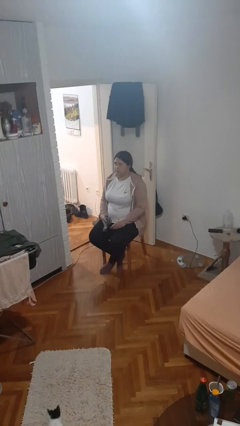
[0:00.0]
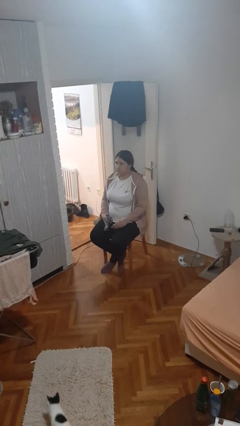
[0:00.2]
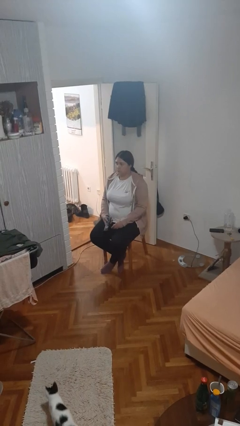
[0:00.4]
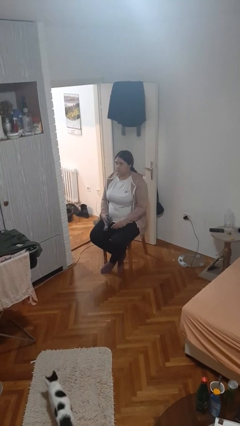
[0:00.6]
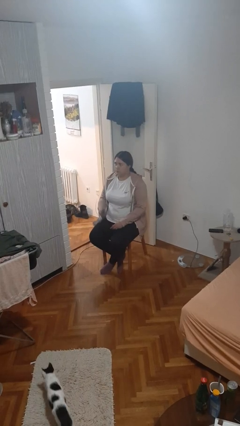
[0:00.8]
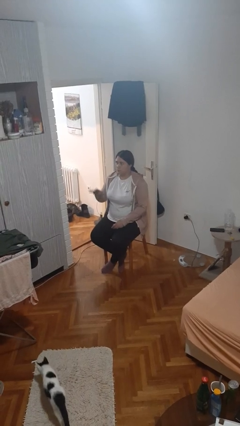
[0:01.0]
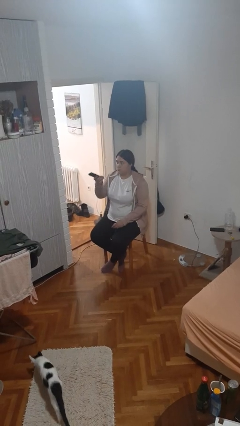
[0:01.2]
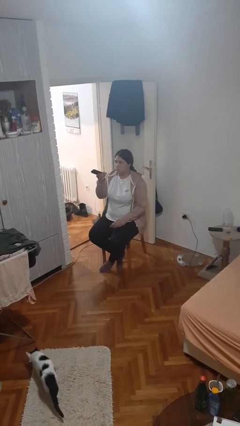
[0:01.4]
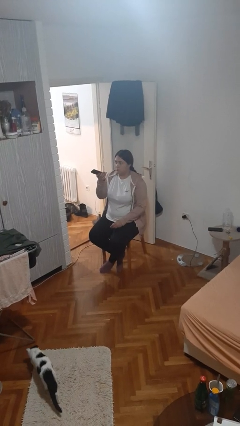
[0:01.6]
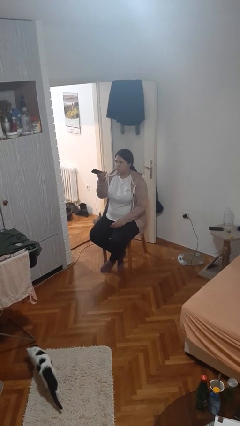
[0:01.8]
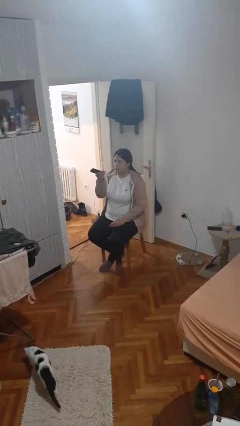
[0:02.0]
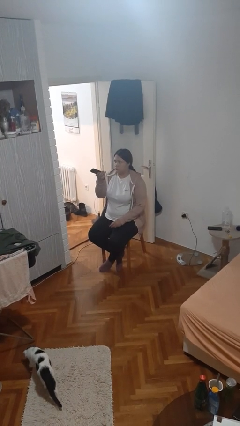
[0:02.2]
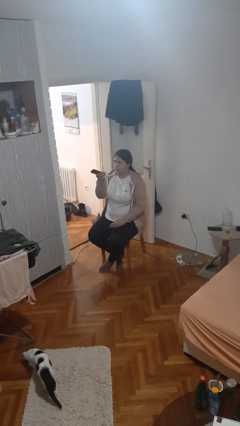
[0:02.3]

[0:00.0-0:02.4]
person uses television remote

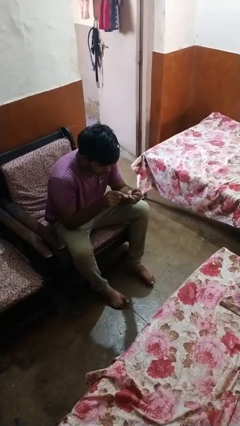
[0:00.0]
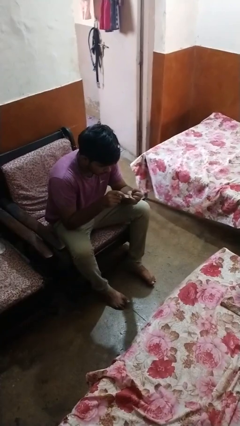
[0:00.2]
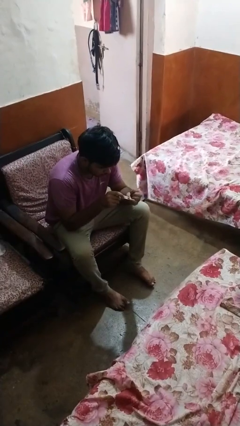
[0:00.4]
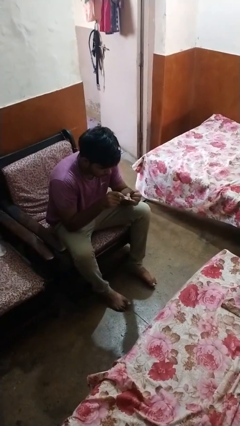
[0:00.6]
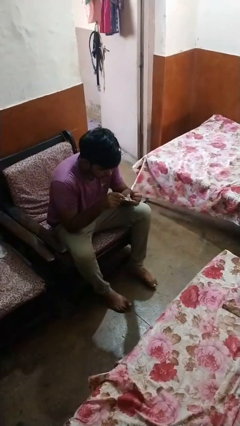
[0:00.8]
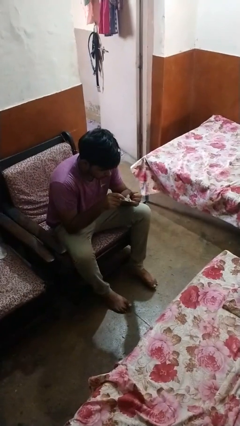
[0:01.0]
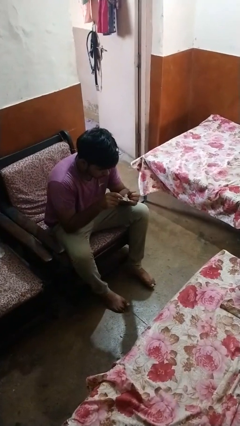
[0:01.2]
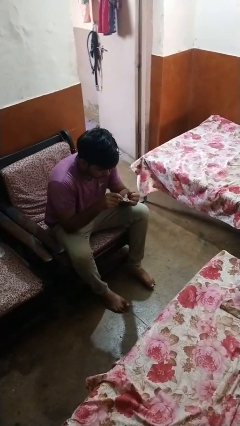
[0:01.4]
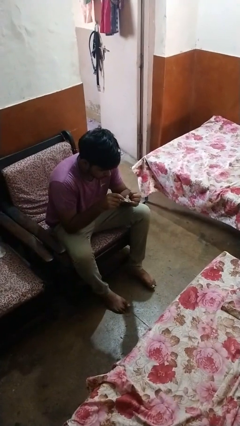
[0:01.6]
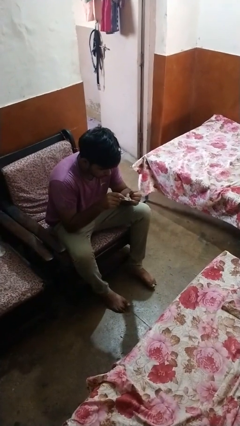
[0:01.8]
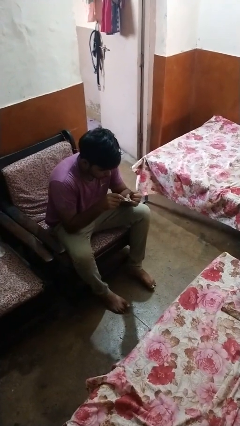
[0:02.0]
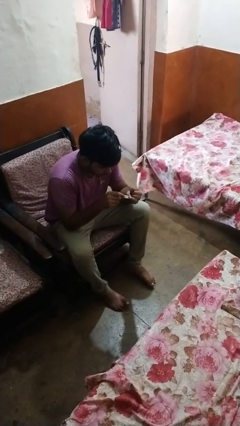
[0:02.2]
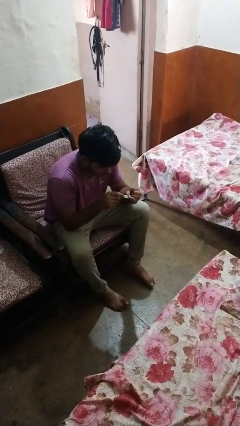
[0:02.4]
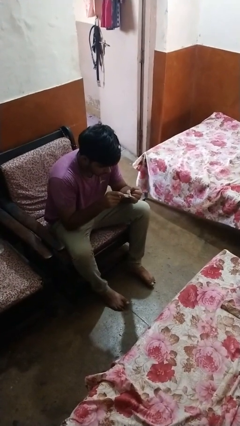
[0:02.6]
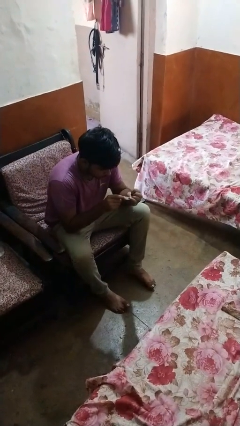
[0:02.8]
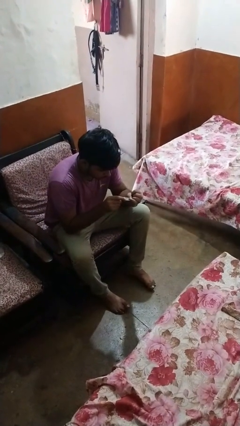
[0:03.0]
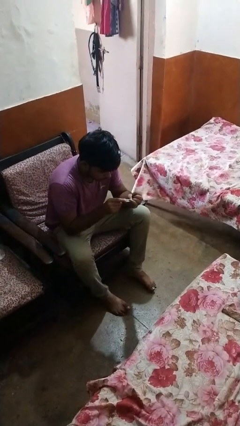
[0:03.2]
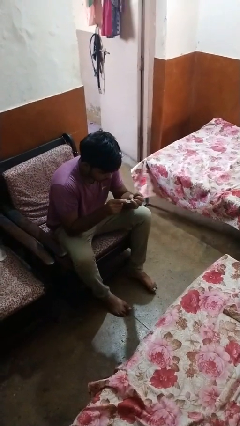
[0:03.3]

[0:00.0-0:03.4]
person clips fingernails

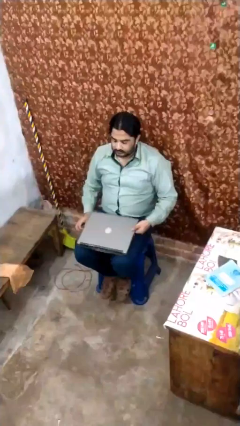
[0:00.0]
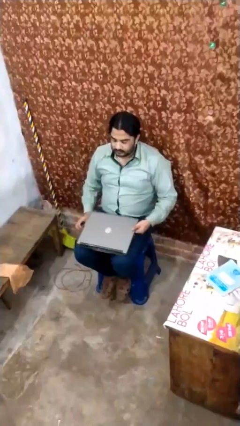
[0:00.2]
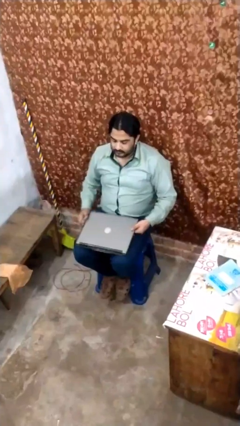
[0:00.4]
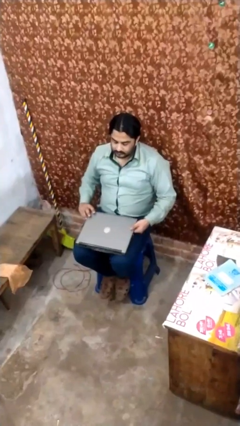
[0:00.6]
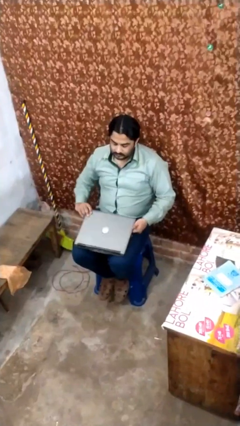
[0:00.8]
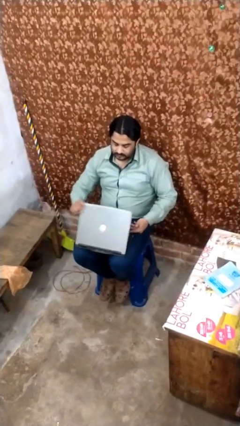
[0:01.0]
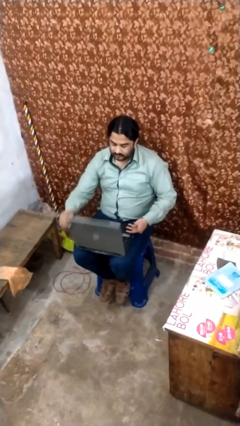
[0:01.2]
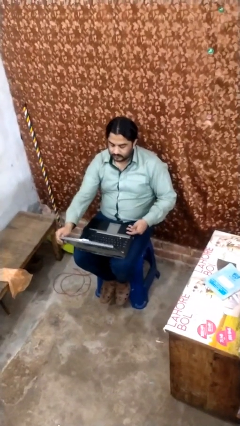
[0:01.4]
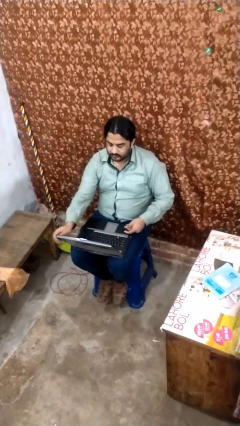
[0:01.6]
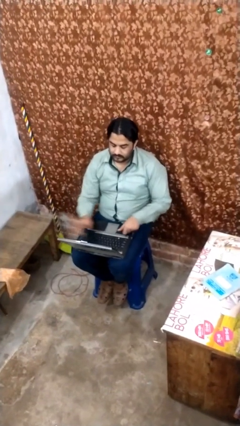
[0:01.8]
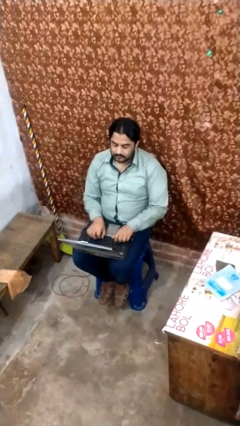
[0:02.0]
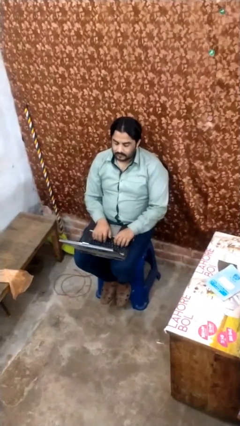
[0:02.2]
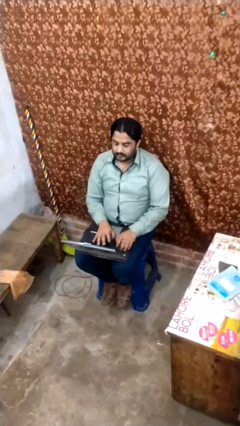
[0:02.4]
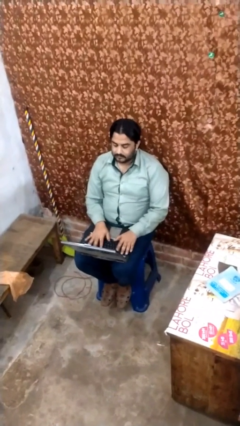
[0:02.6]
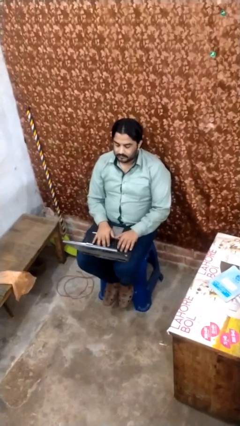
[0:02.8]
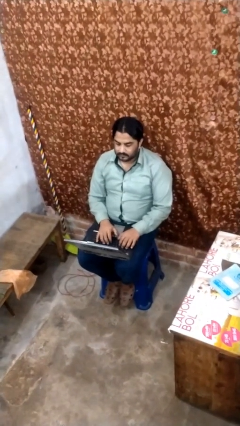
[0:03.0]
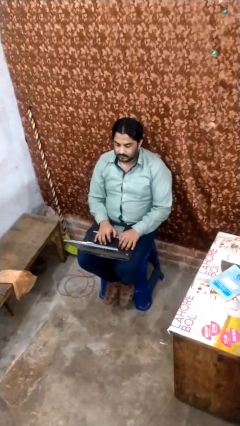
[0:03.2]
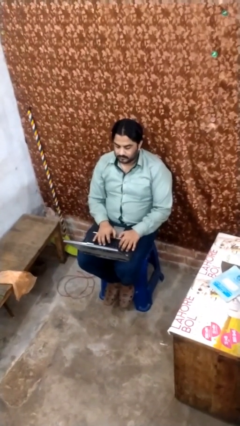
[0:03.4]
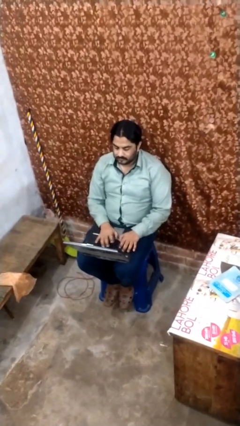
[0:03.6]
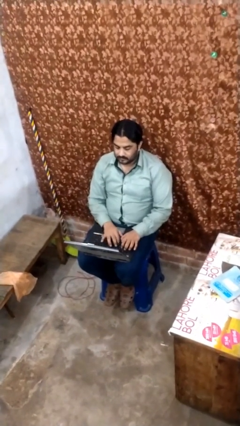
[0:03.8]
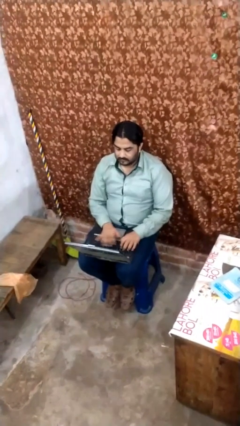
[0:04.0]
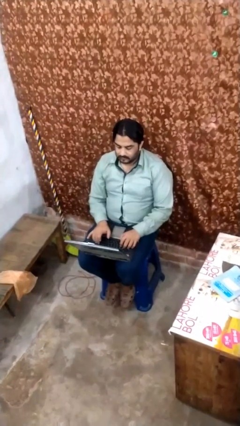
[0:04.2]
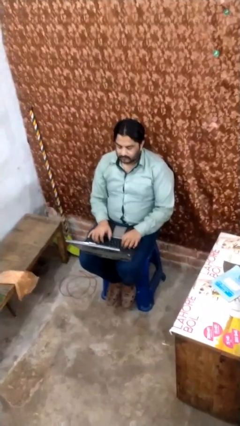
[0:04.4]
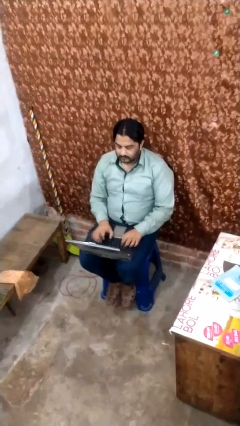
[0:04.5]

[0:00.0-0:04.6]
person interacts with laptop

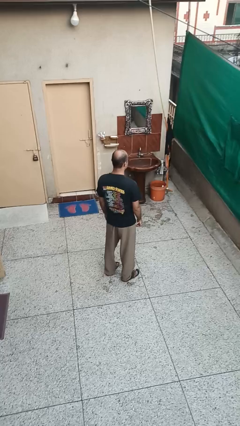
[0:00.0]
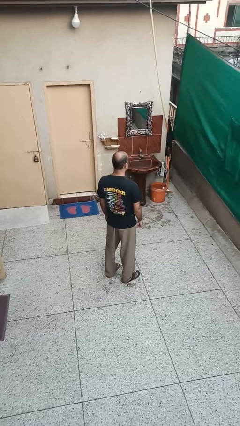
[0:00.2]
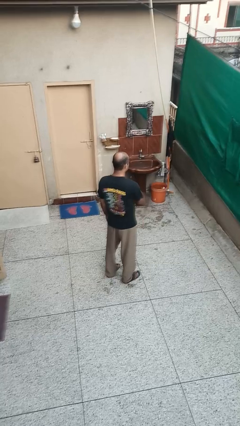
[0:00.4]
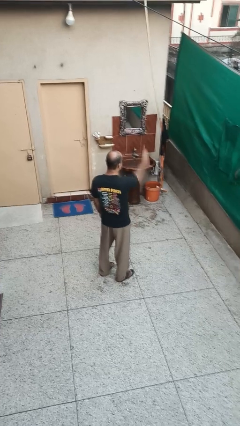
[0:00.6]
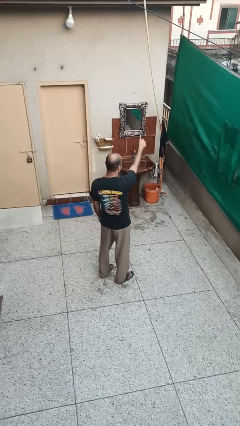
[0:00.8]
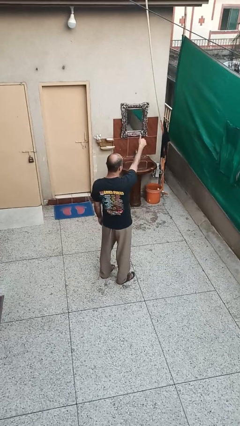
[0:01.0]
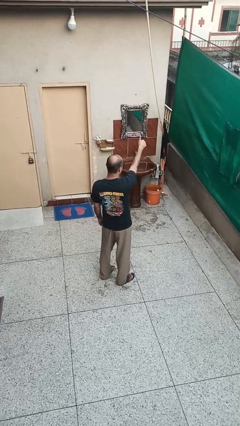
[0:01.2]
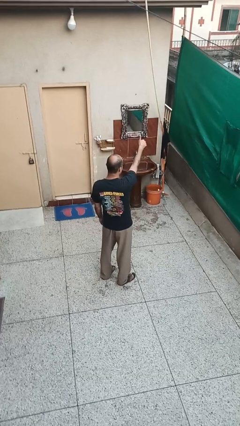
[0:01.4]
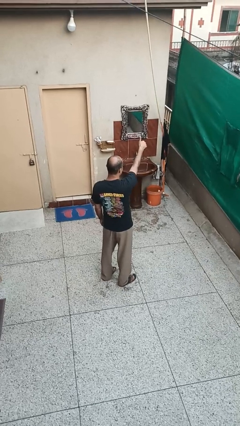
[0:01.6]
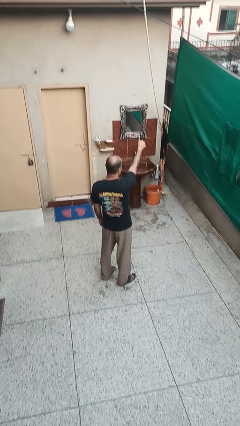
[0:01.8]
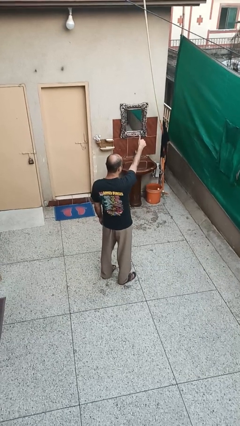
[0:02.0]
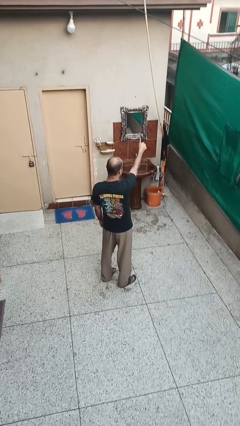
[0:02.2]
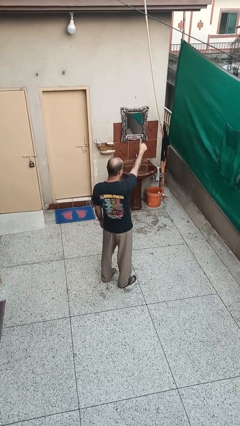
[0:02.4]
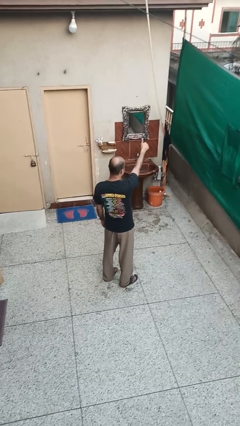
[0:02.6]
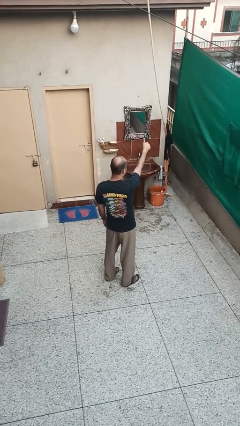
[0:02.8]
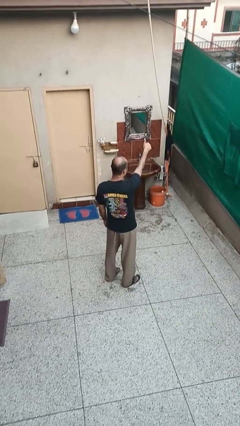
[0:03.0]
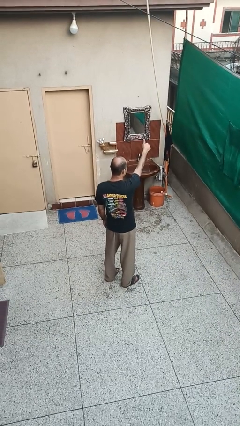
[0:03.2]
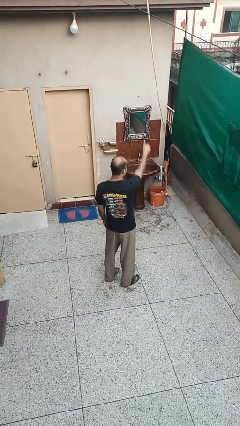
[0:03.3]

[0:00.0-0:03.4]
person gestures thumbs up

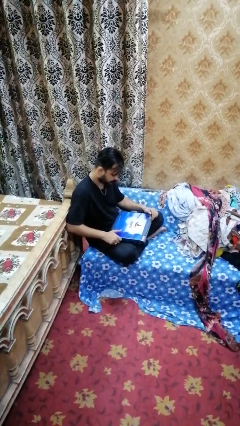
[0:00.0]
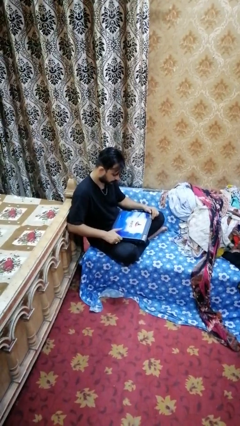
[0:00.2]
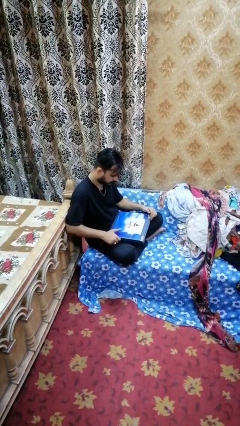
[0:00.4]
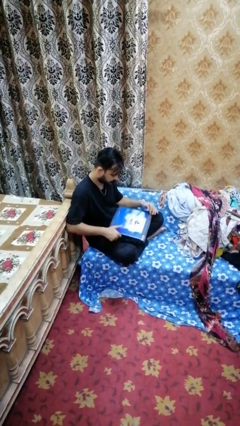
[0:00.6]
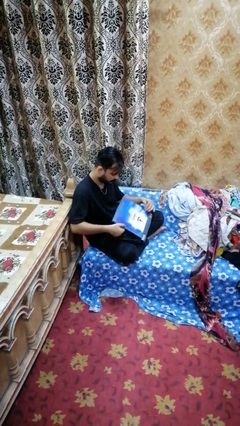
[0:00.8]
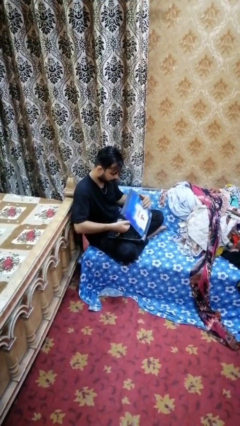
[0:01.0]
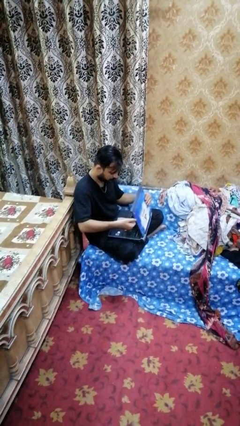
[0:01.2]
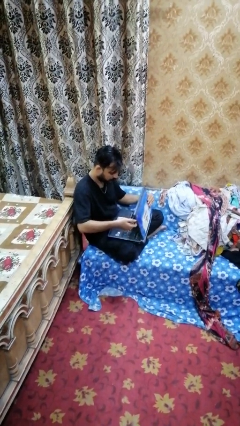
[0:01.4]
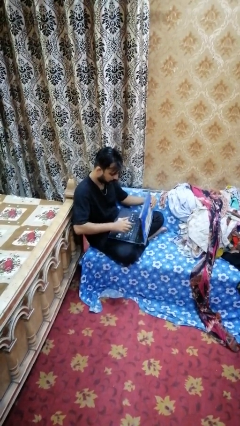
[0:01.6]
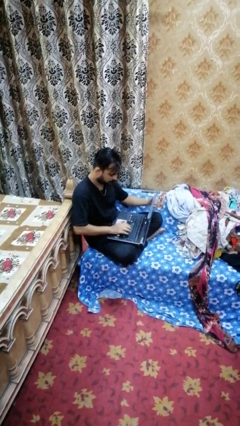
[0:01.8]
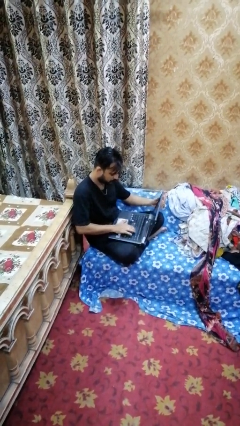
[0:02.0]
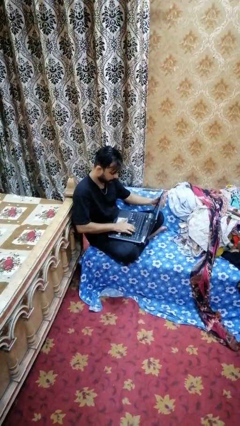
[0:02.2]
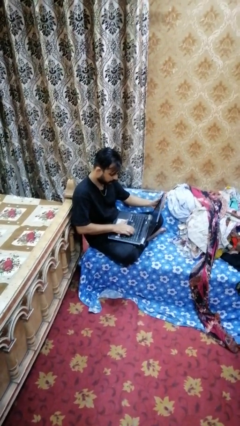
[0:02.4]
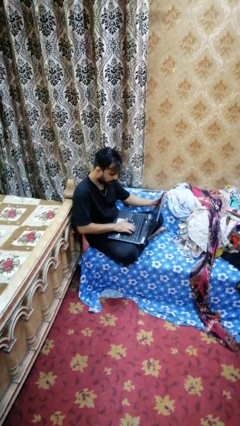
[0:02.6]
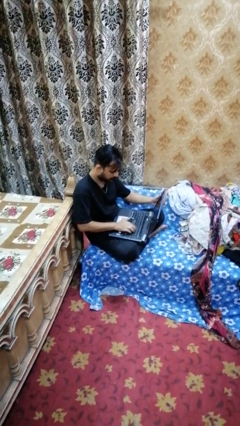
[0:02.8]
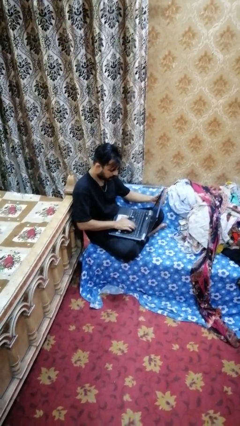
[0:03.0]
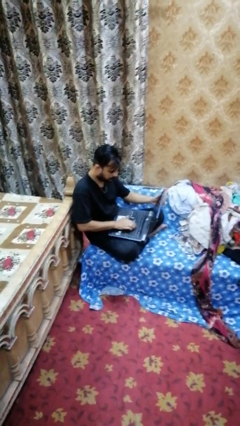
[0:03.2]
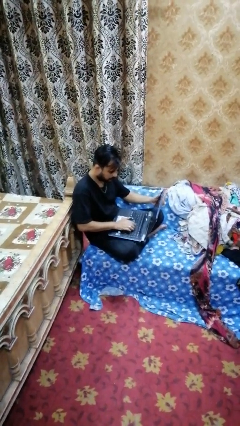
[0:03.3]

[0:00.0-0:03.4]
person opens laptop

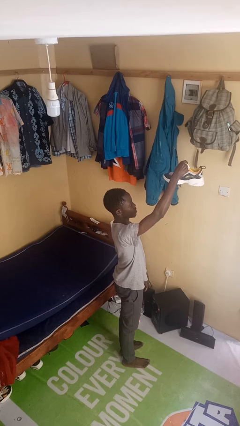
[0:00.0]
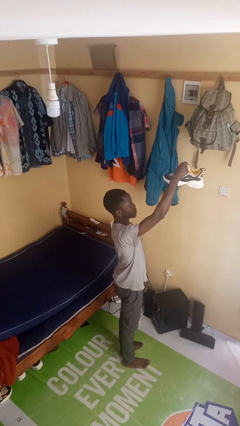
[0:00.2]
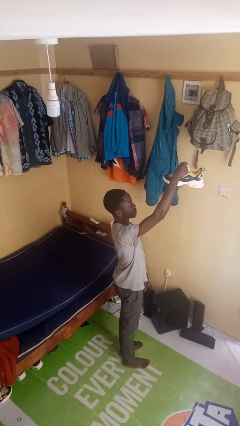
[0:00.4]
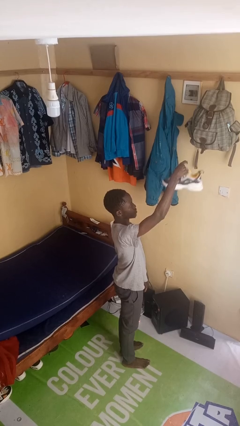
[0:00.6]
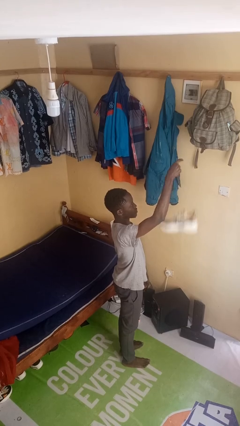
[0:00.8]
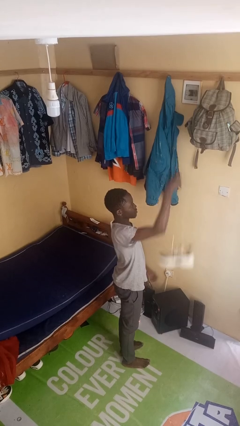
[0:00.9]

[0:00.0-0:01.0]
person drops object
